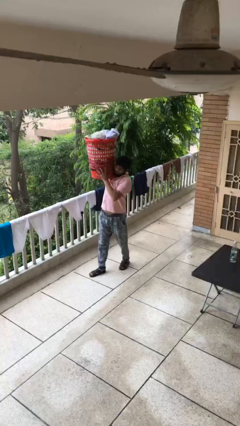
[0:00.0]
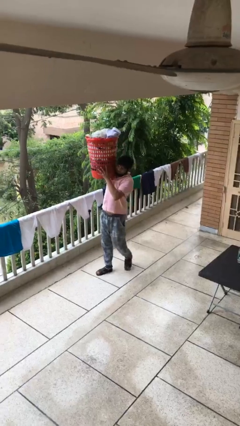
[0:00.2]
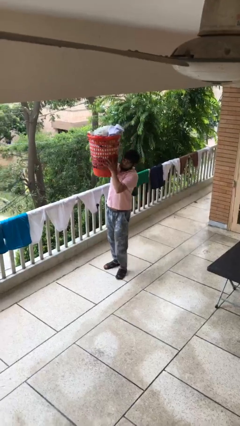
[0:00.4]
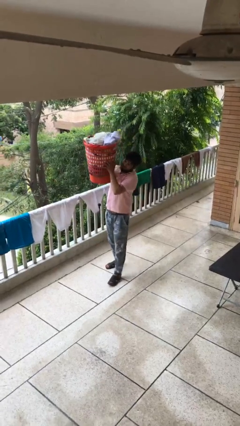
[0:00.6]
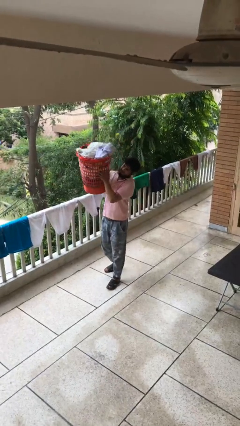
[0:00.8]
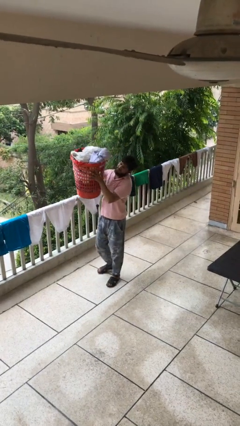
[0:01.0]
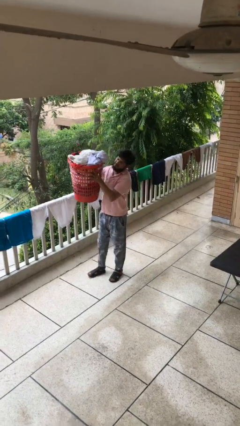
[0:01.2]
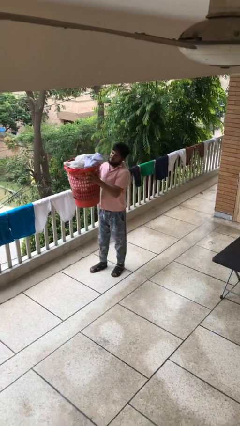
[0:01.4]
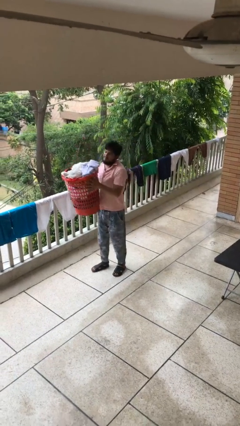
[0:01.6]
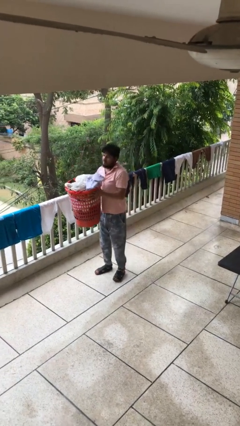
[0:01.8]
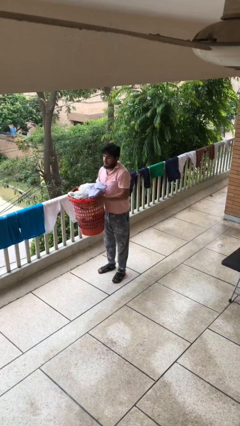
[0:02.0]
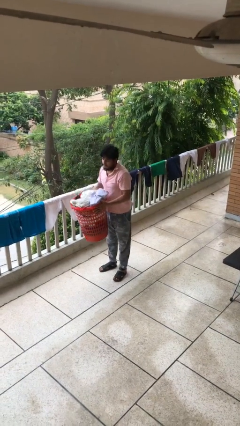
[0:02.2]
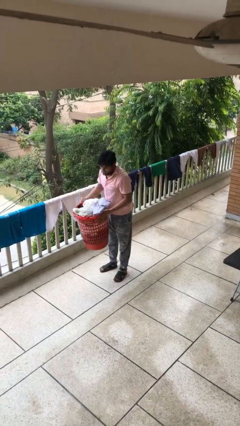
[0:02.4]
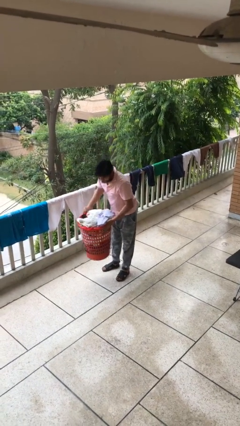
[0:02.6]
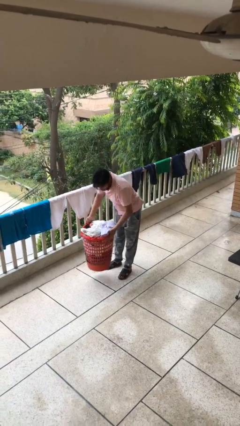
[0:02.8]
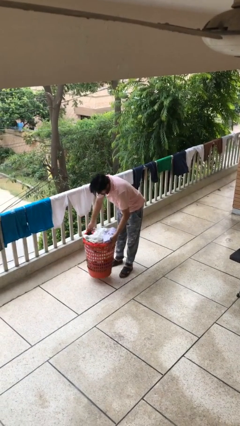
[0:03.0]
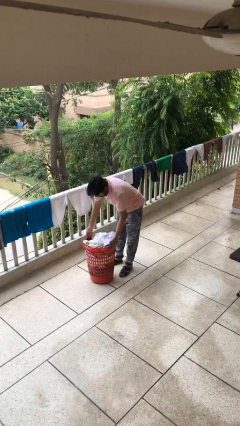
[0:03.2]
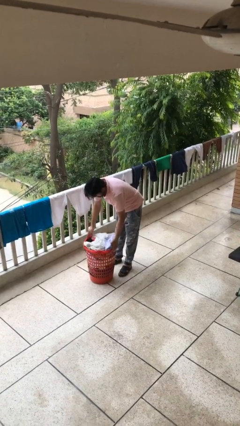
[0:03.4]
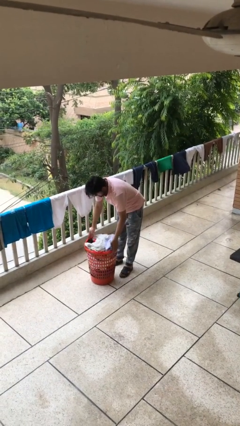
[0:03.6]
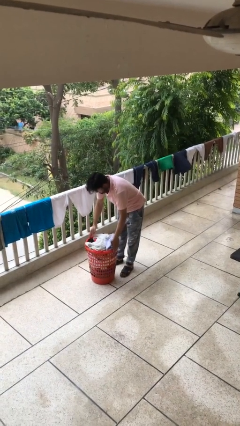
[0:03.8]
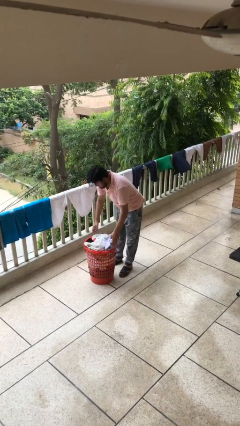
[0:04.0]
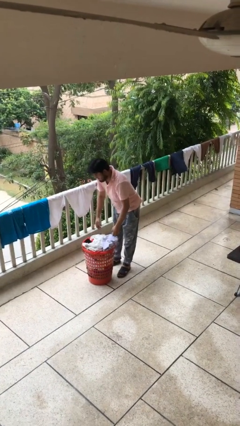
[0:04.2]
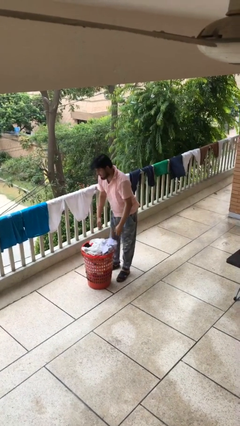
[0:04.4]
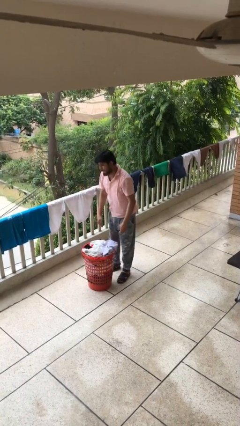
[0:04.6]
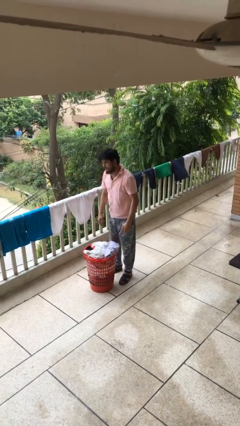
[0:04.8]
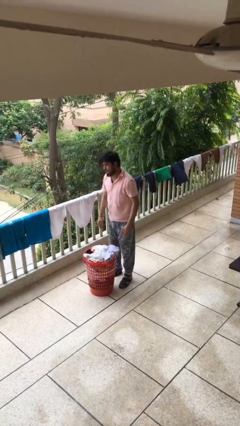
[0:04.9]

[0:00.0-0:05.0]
person puts down object on floor

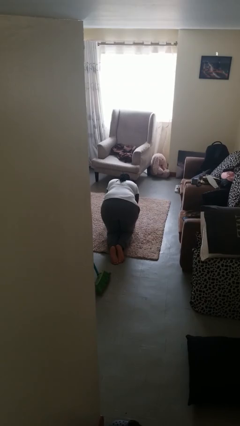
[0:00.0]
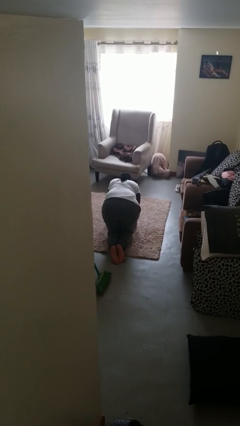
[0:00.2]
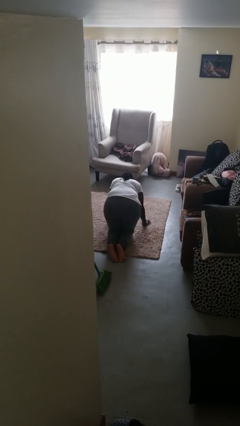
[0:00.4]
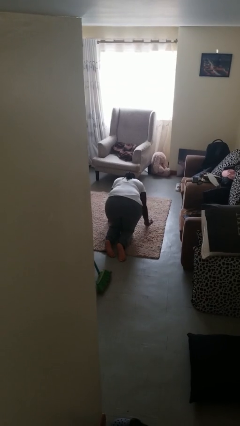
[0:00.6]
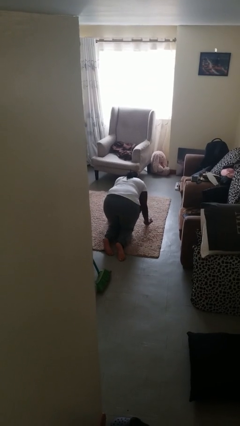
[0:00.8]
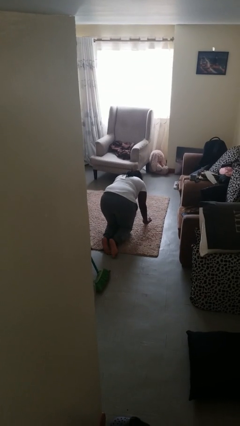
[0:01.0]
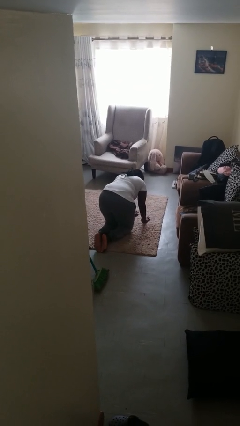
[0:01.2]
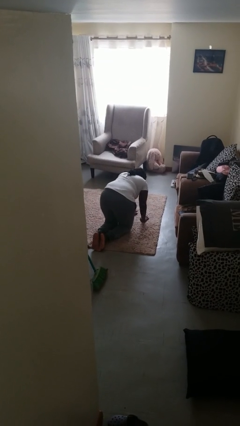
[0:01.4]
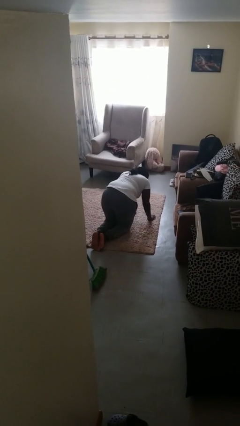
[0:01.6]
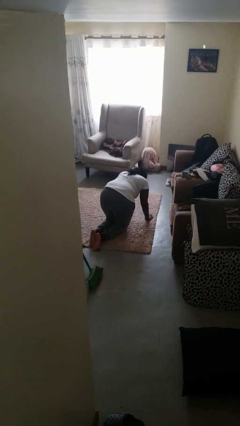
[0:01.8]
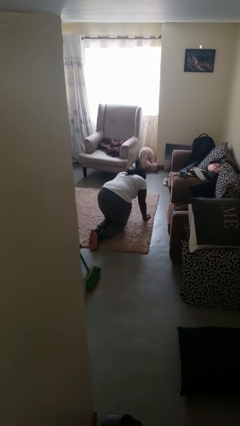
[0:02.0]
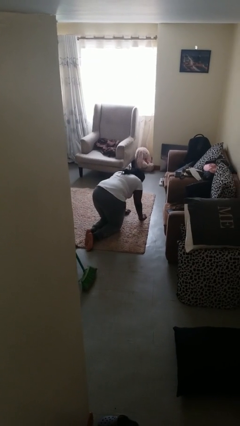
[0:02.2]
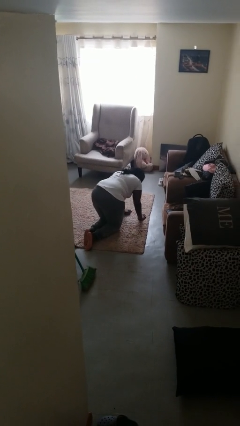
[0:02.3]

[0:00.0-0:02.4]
person crawls

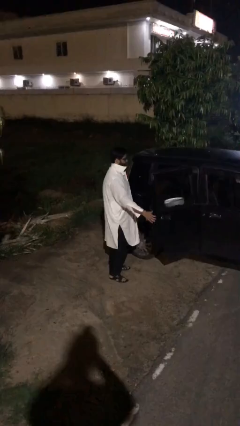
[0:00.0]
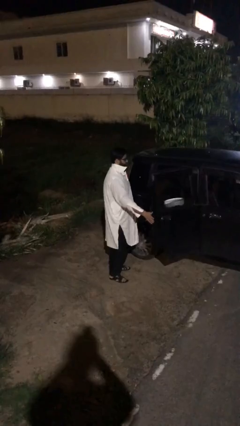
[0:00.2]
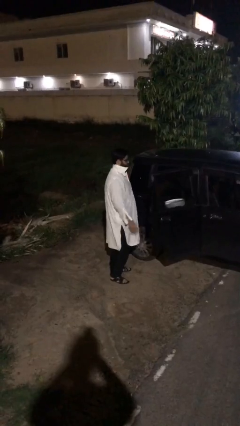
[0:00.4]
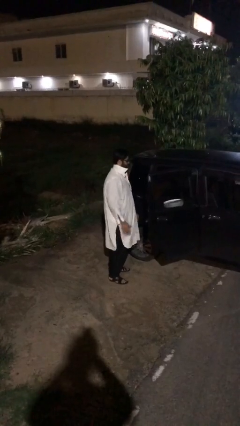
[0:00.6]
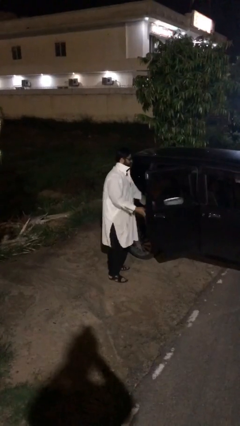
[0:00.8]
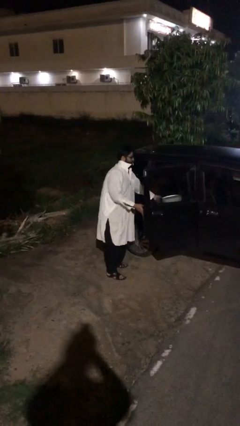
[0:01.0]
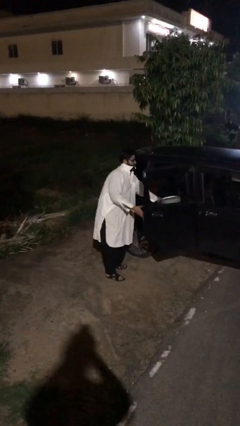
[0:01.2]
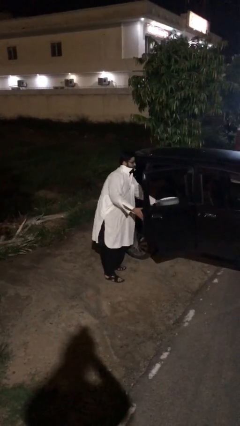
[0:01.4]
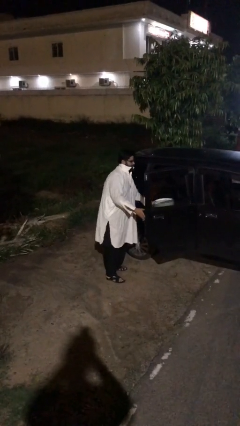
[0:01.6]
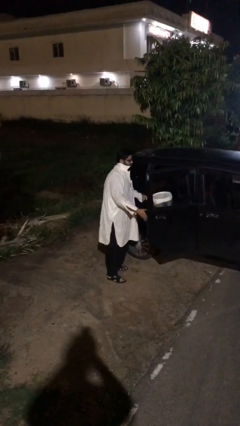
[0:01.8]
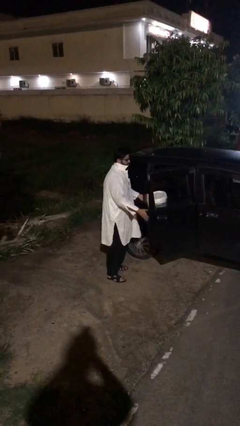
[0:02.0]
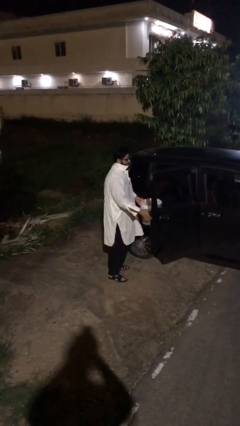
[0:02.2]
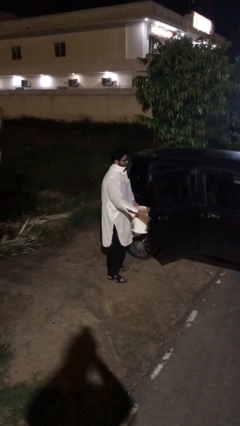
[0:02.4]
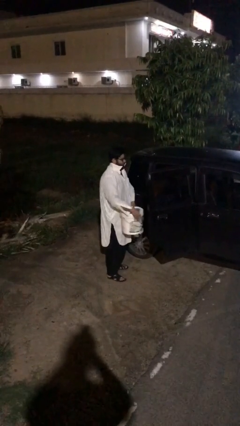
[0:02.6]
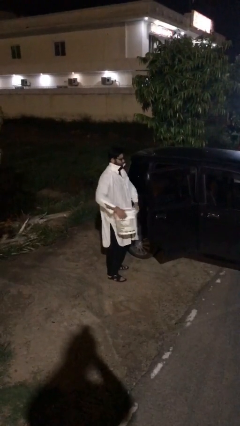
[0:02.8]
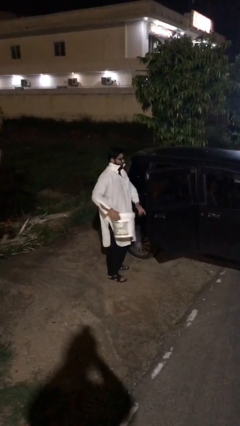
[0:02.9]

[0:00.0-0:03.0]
person unloads car

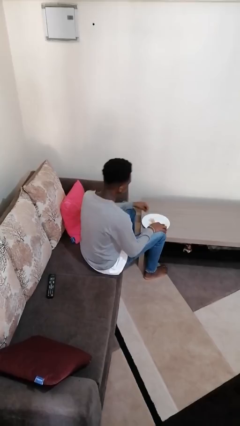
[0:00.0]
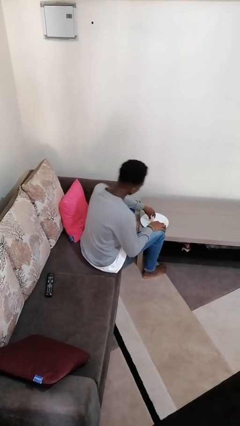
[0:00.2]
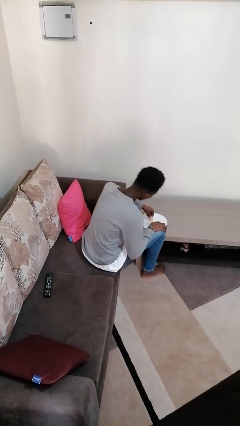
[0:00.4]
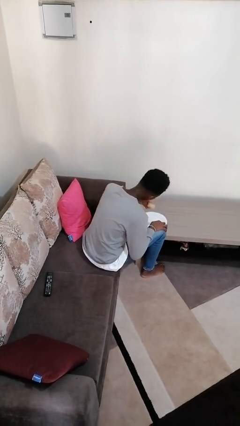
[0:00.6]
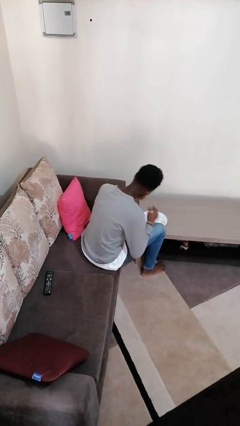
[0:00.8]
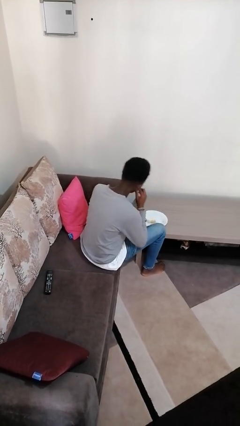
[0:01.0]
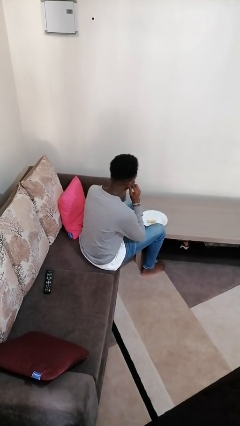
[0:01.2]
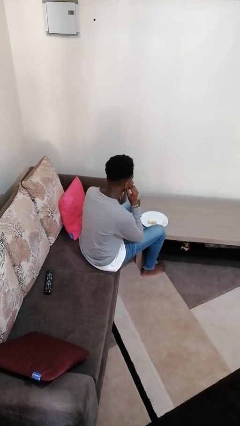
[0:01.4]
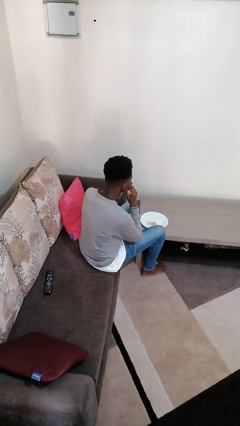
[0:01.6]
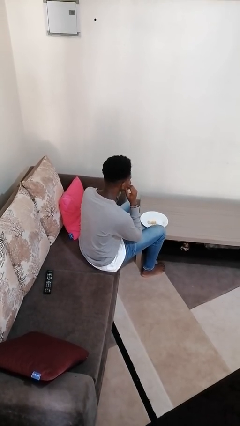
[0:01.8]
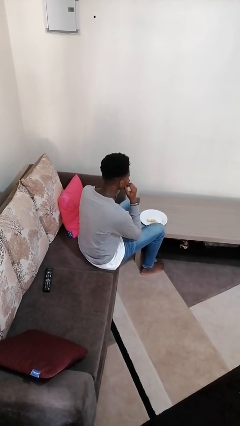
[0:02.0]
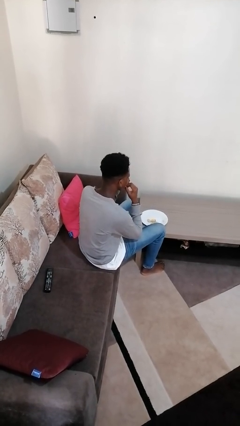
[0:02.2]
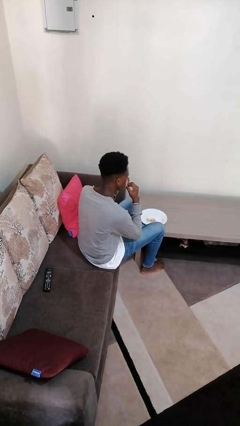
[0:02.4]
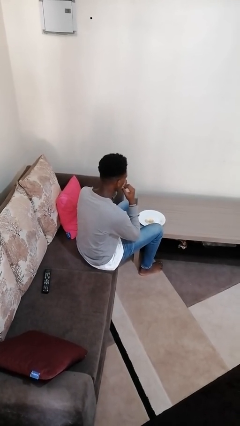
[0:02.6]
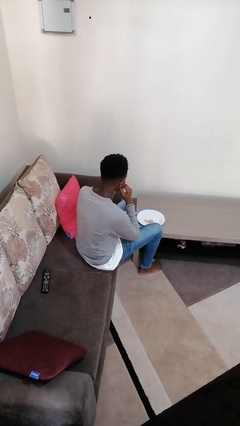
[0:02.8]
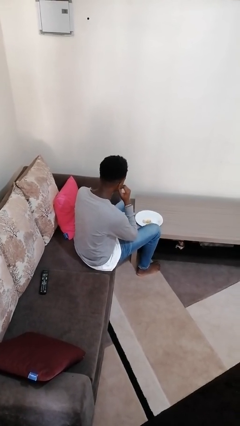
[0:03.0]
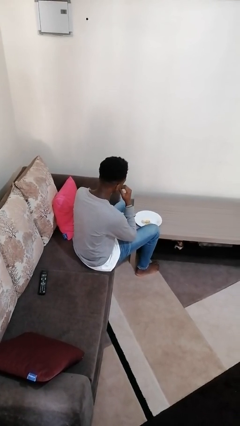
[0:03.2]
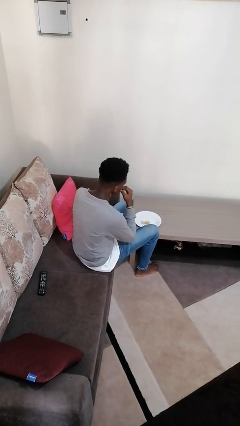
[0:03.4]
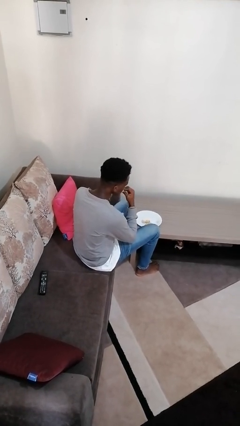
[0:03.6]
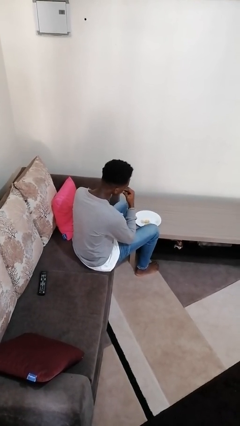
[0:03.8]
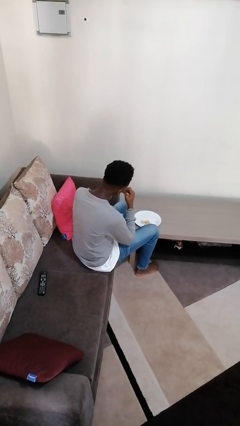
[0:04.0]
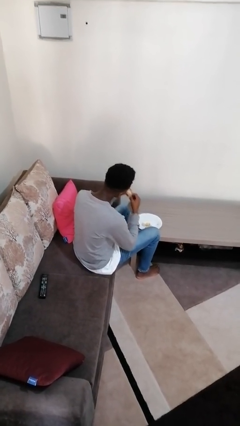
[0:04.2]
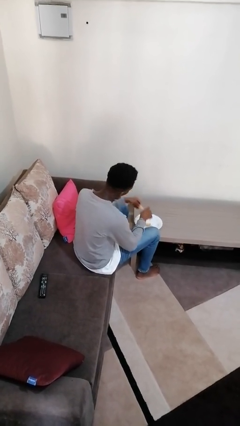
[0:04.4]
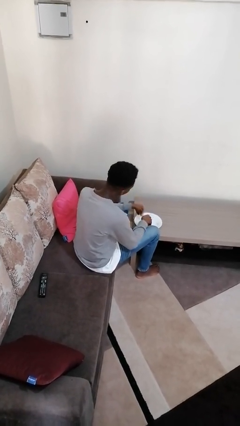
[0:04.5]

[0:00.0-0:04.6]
person eats with hands

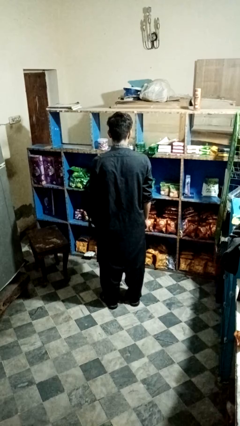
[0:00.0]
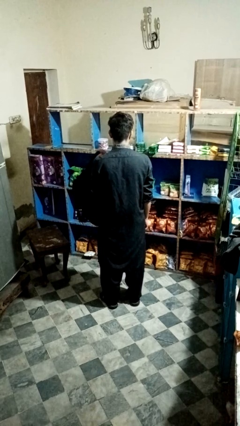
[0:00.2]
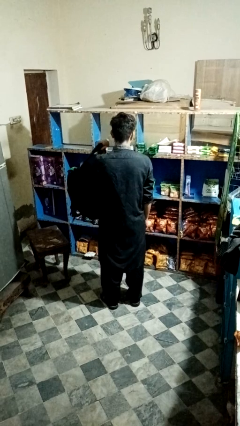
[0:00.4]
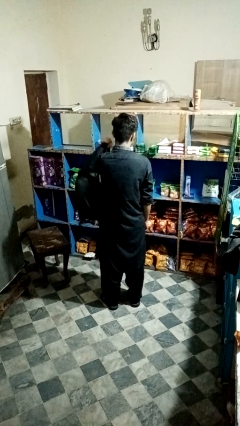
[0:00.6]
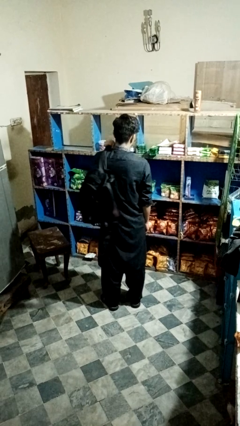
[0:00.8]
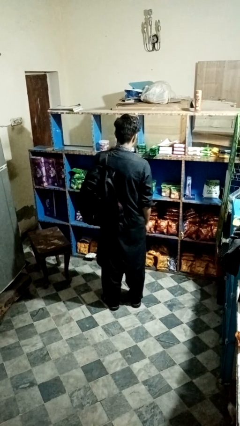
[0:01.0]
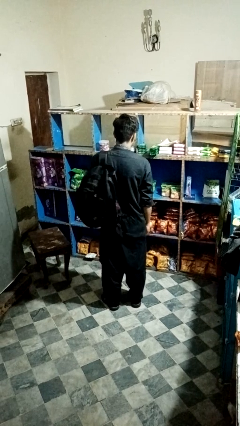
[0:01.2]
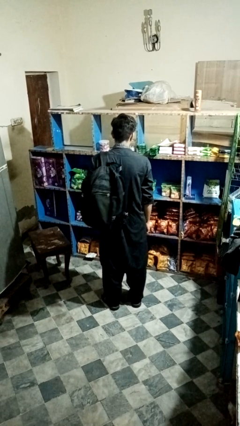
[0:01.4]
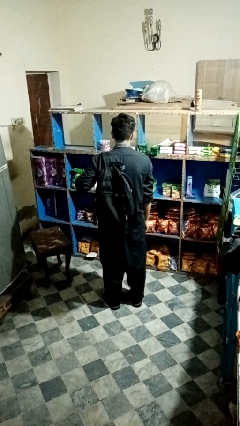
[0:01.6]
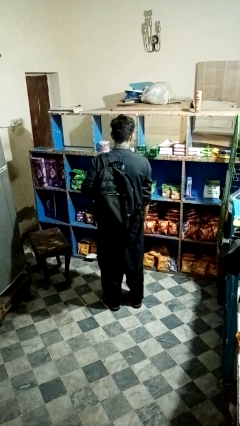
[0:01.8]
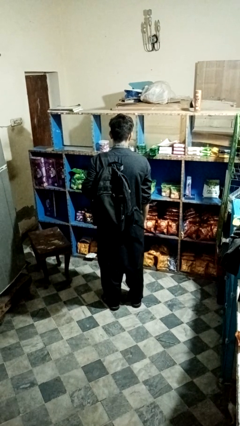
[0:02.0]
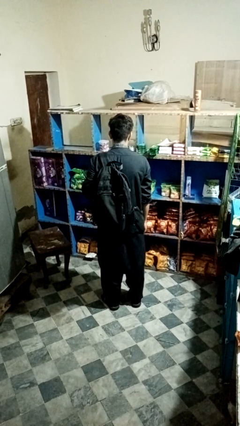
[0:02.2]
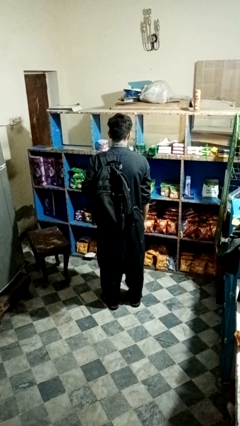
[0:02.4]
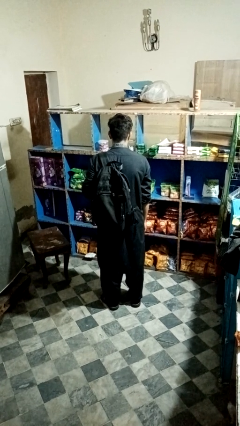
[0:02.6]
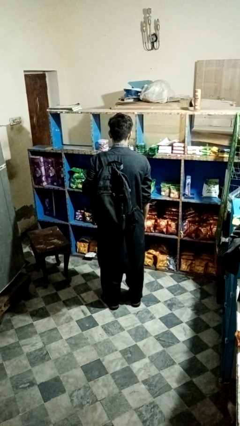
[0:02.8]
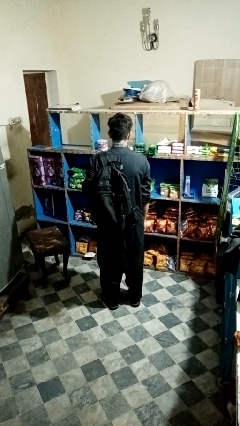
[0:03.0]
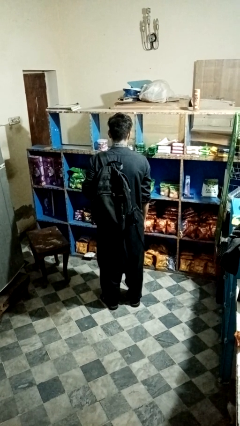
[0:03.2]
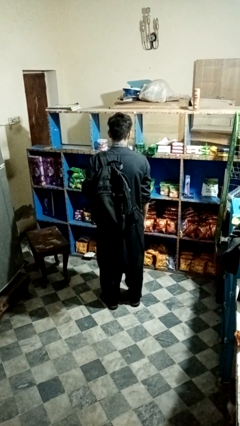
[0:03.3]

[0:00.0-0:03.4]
person puts on backpack
